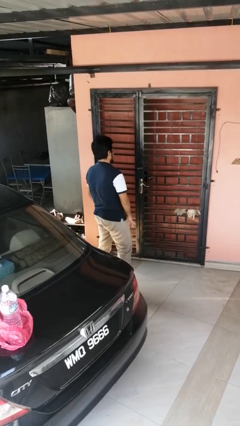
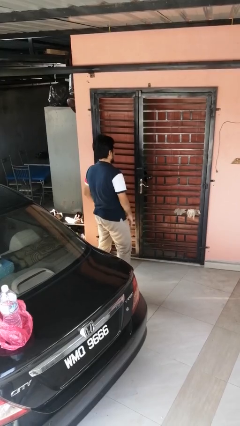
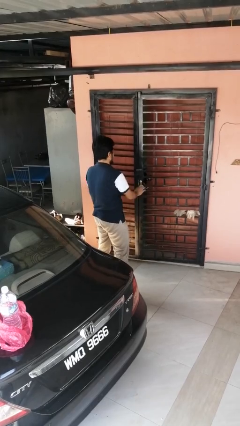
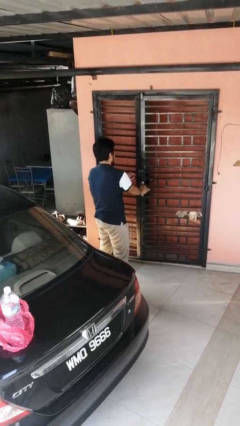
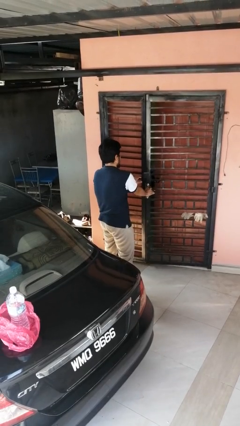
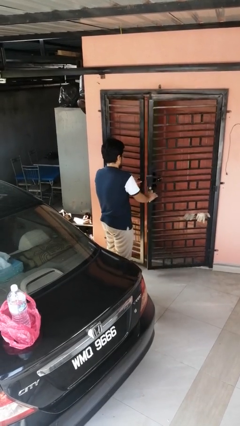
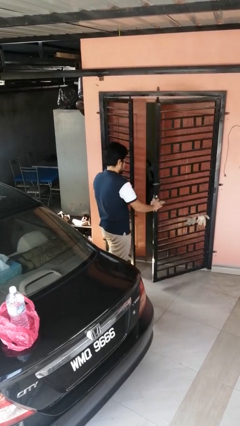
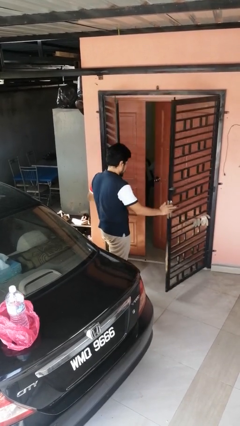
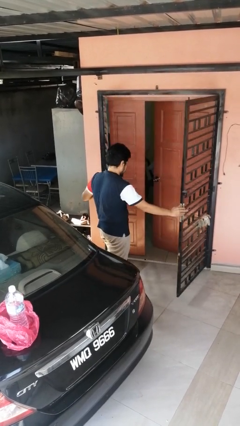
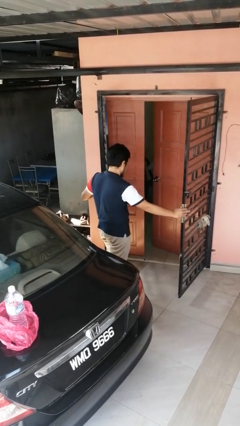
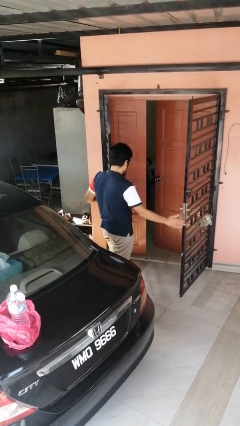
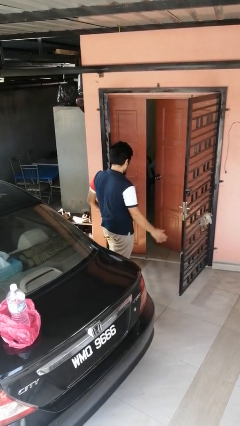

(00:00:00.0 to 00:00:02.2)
person opens gate

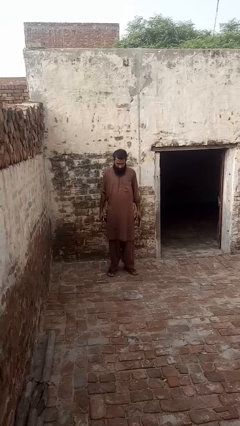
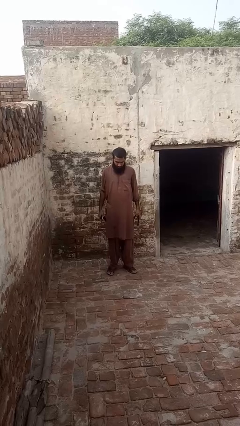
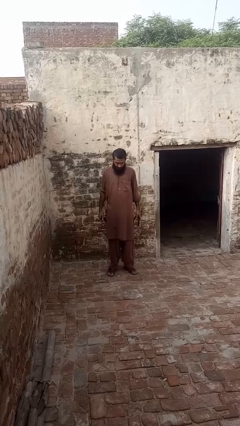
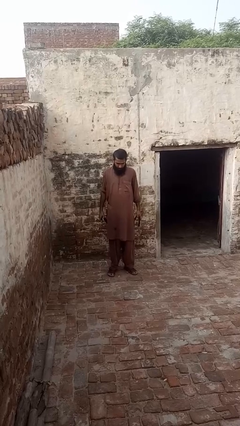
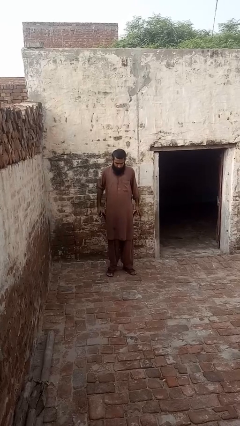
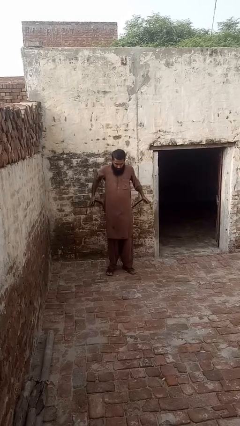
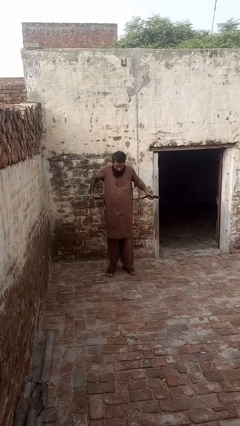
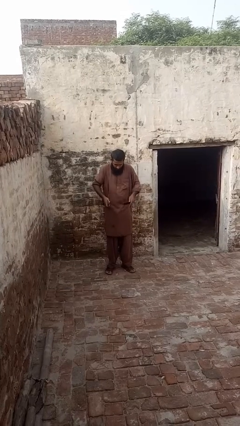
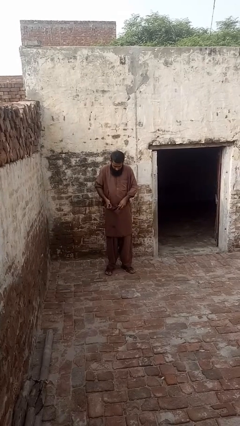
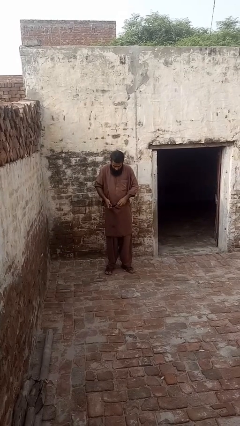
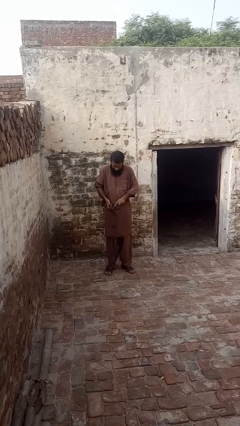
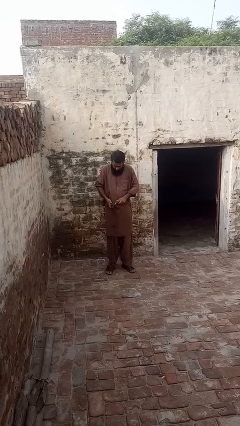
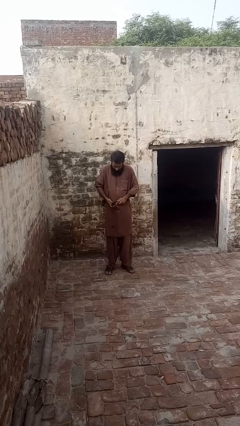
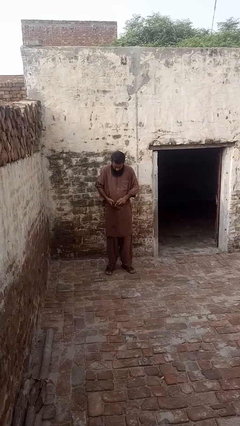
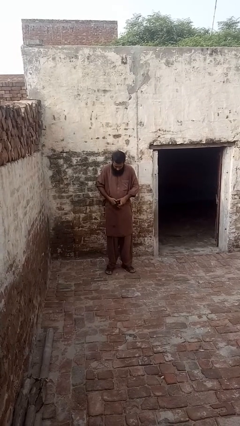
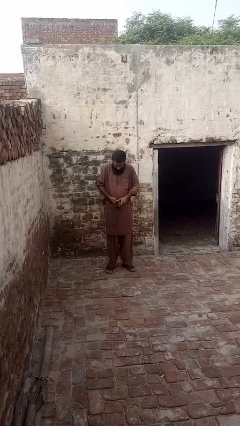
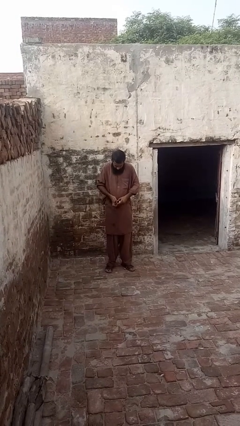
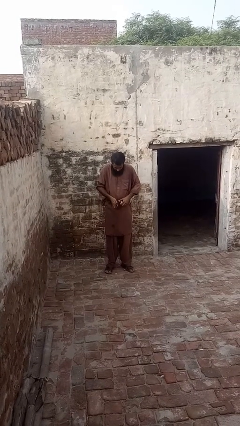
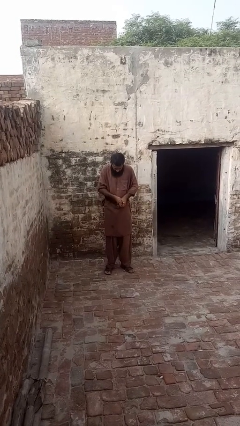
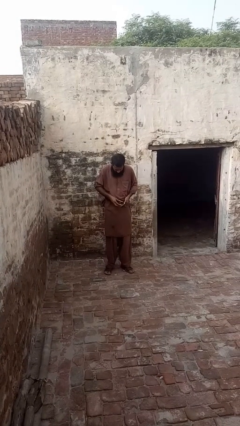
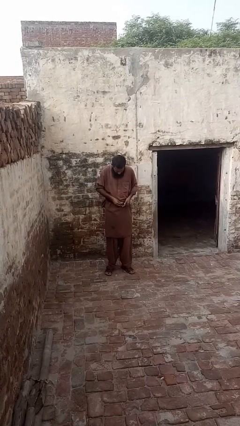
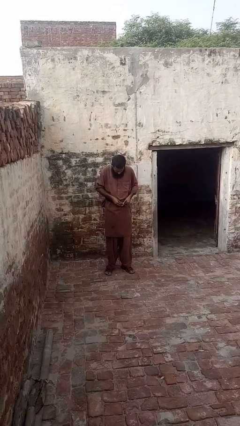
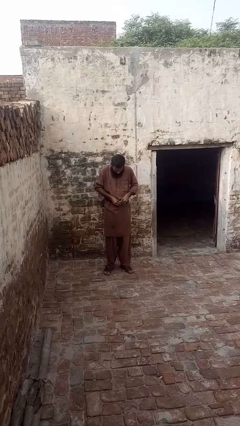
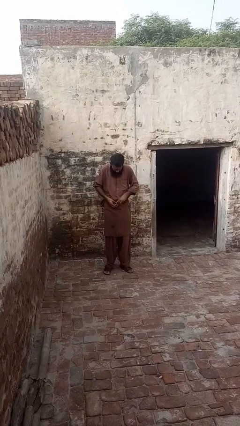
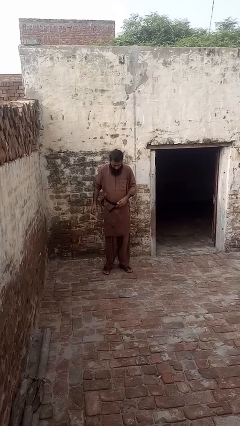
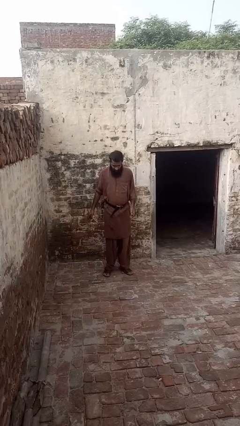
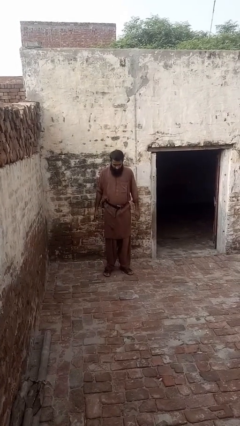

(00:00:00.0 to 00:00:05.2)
person puts on belt

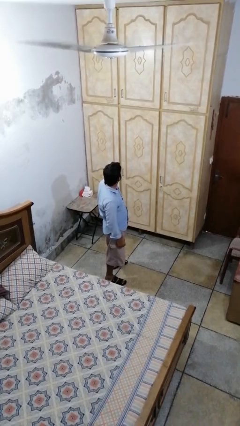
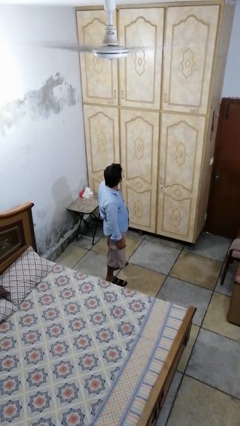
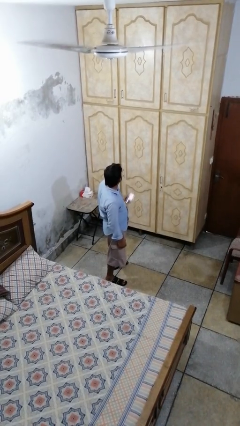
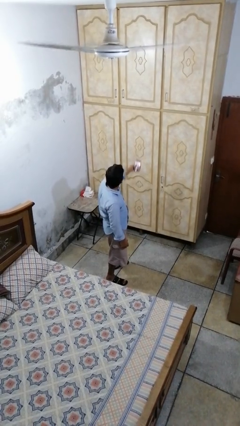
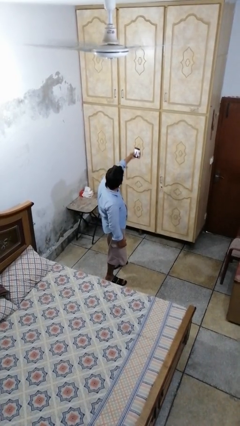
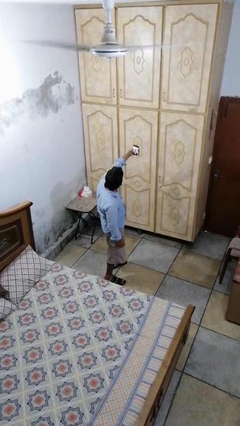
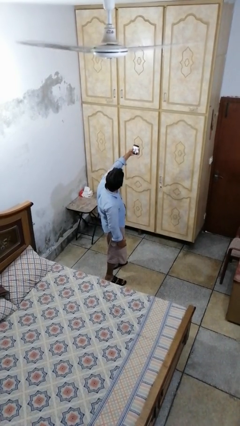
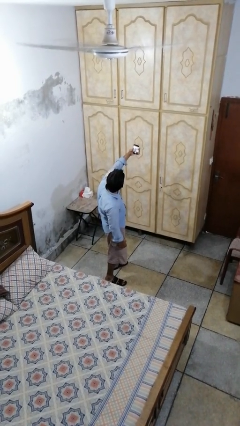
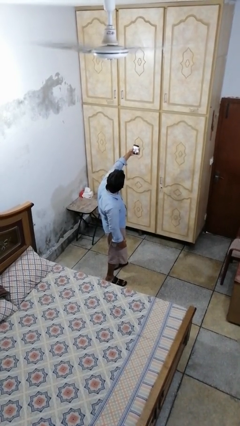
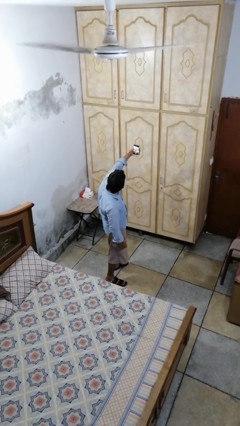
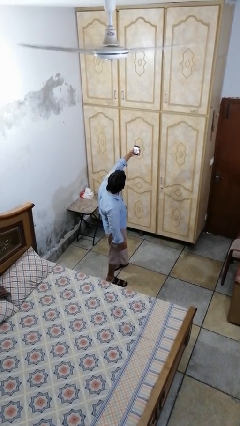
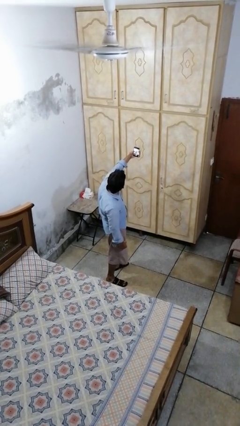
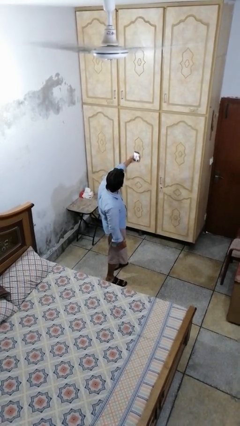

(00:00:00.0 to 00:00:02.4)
person takes selfie

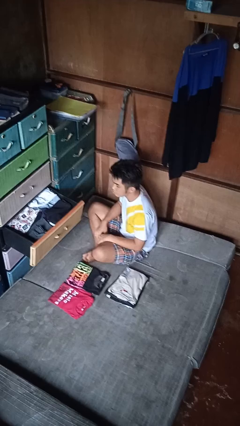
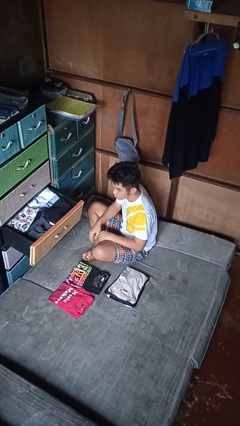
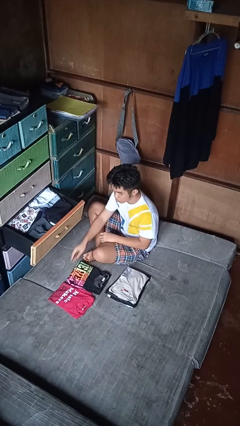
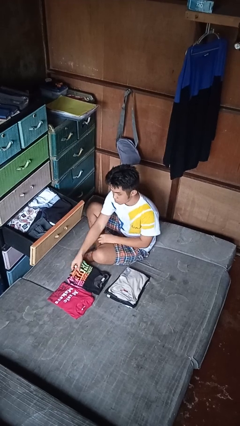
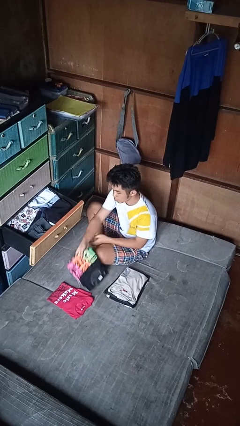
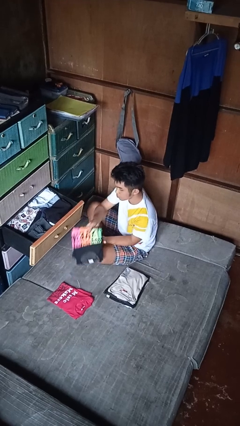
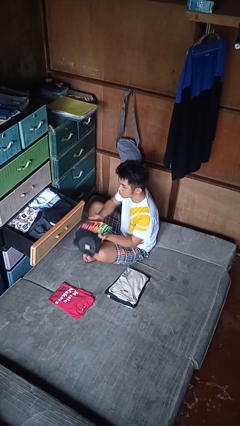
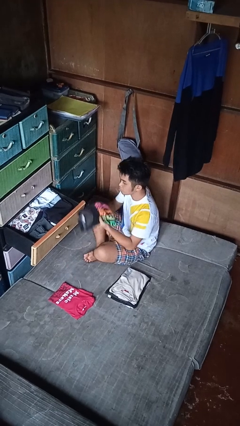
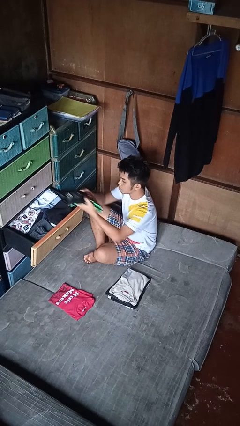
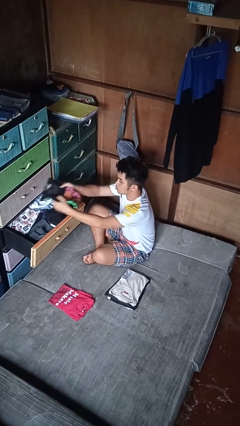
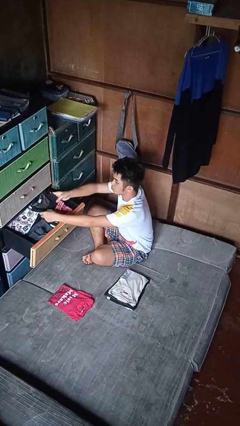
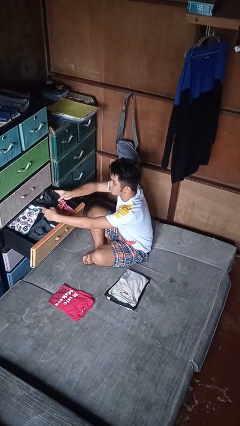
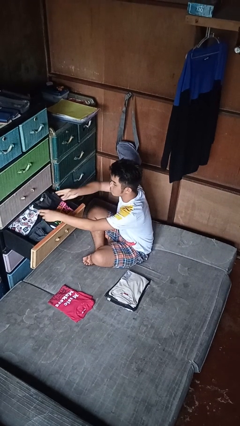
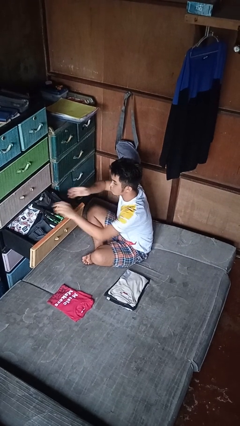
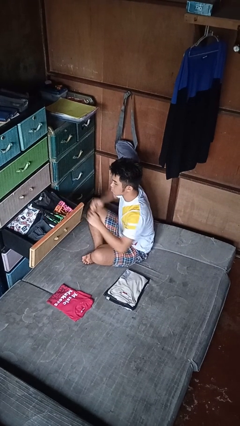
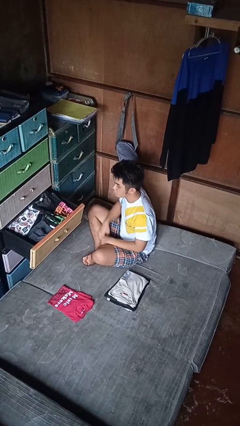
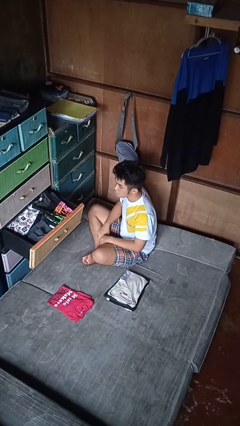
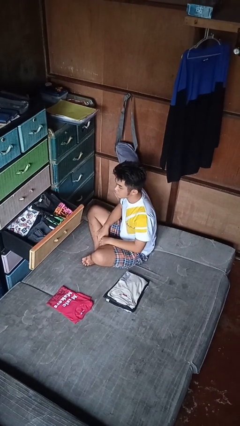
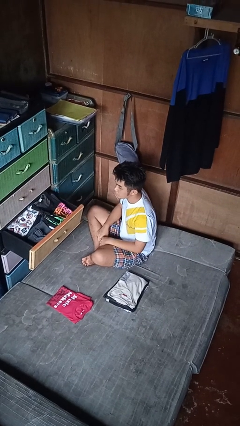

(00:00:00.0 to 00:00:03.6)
person puts clothes into dresser

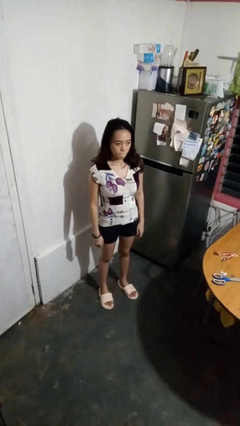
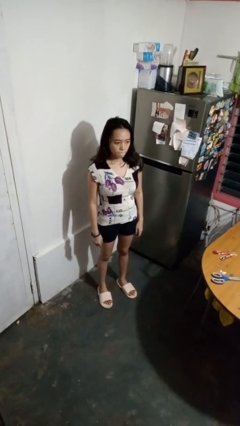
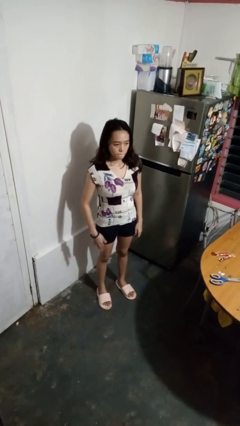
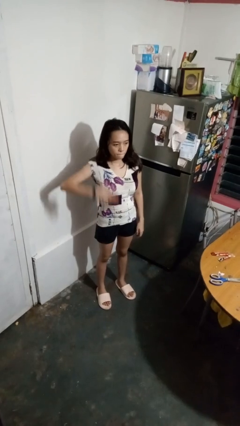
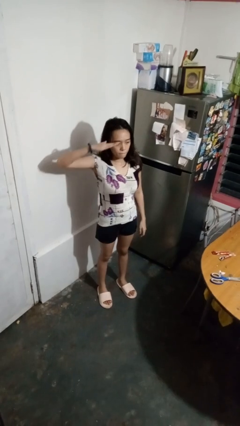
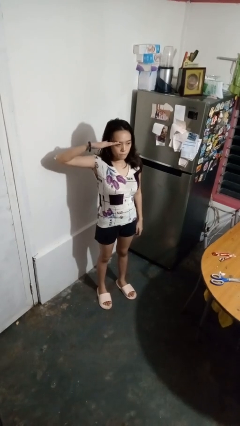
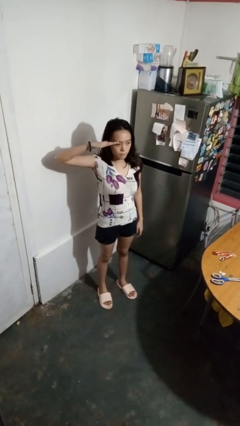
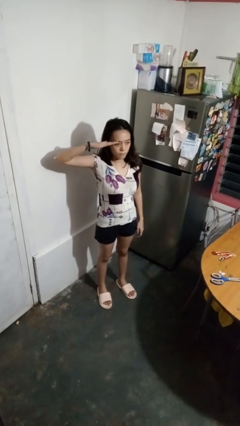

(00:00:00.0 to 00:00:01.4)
person salutes

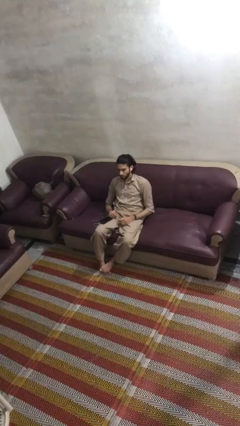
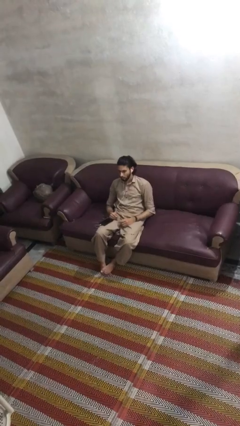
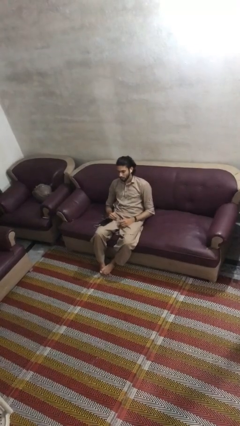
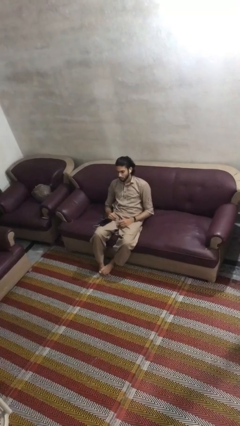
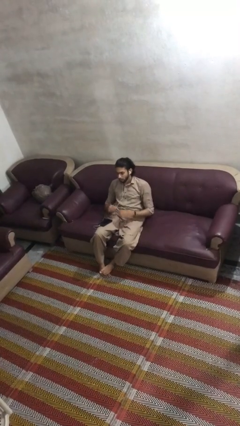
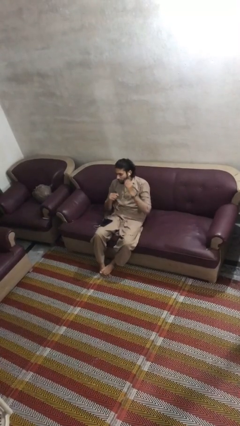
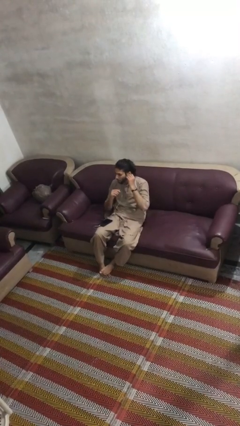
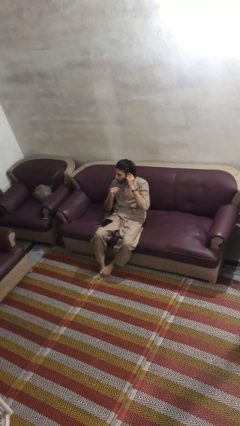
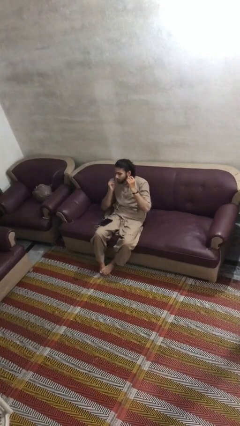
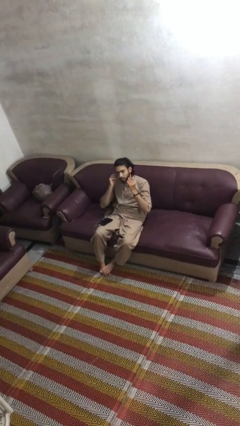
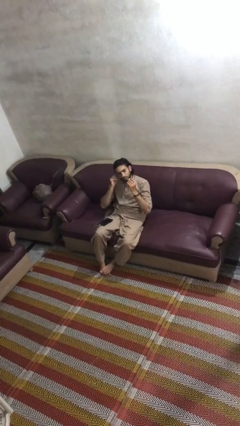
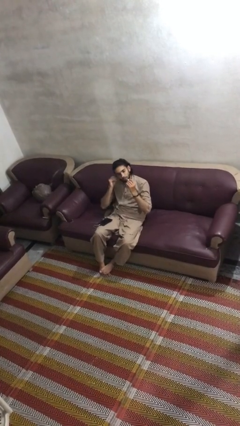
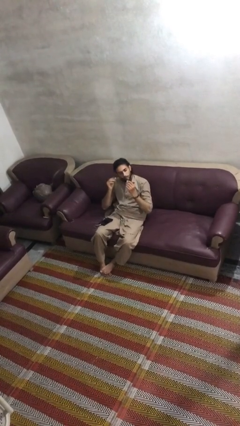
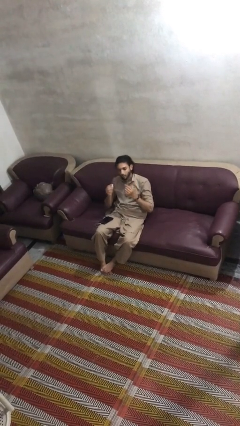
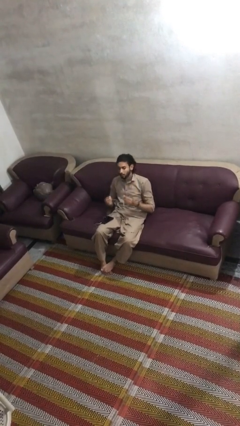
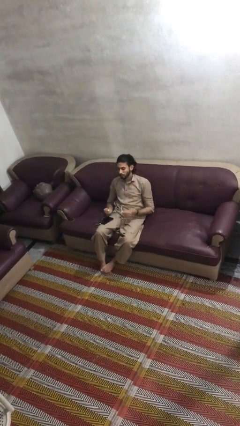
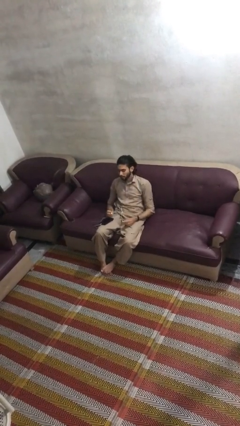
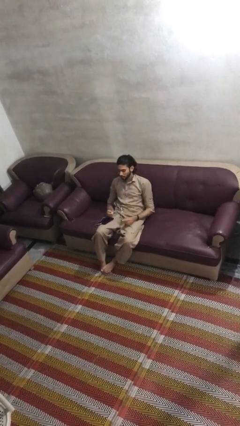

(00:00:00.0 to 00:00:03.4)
person takes off headphones
